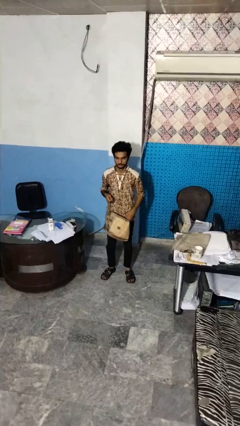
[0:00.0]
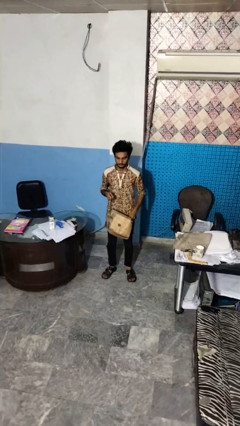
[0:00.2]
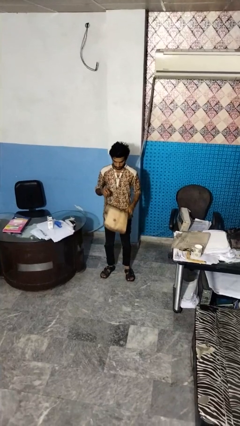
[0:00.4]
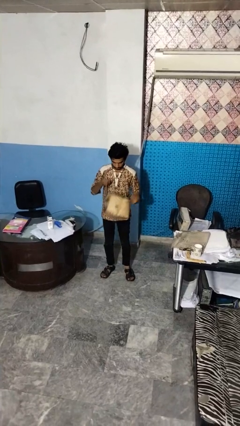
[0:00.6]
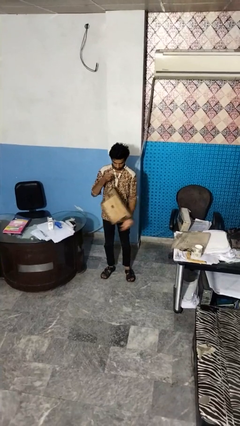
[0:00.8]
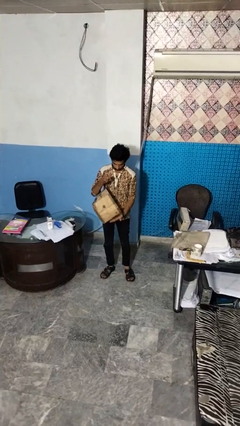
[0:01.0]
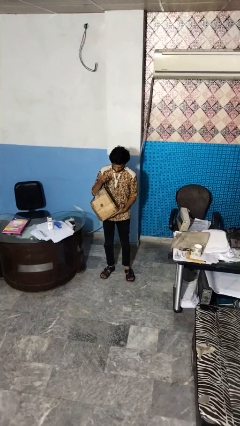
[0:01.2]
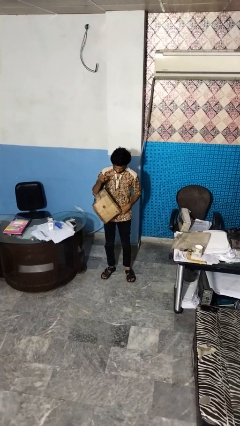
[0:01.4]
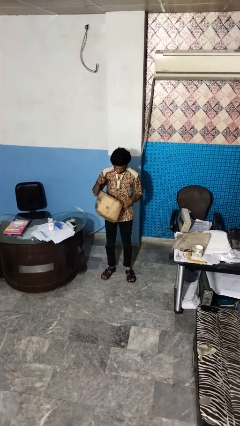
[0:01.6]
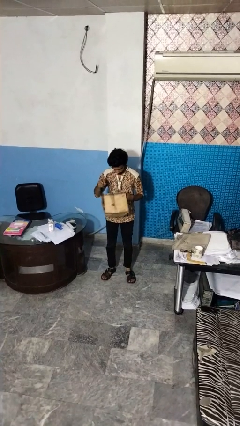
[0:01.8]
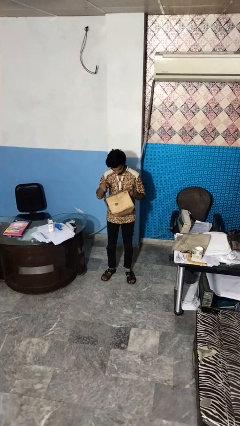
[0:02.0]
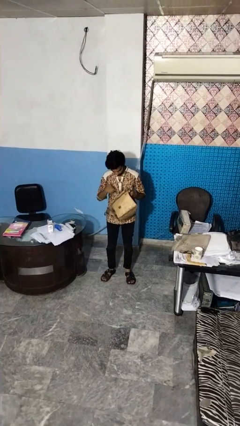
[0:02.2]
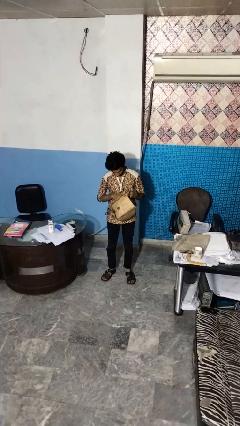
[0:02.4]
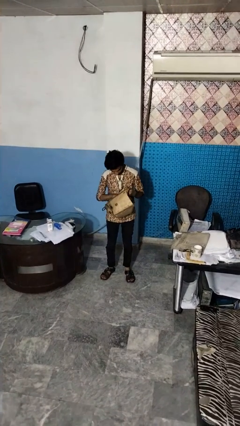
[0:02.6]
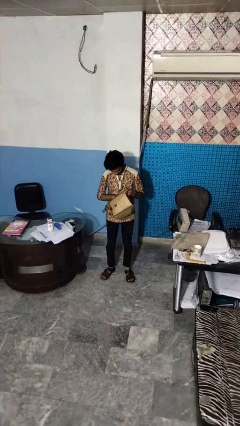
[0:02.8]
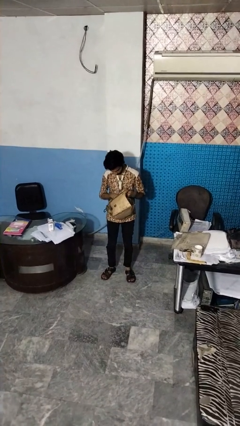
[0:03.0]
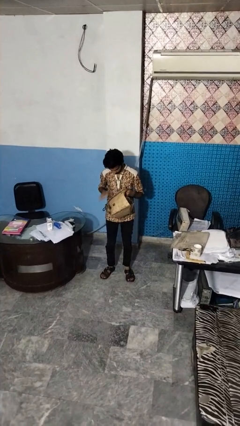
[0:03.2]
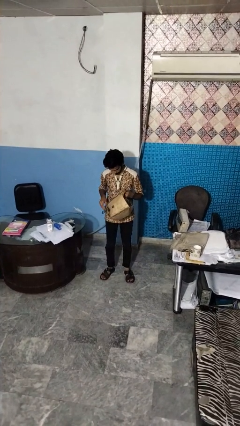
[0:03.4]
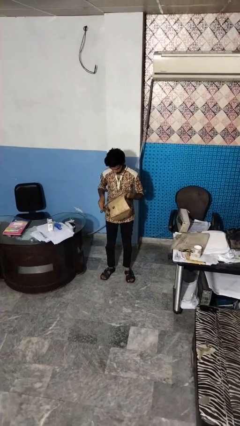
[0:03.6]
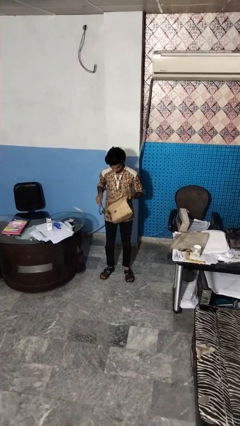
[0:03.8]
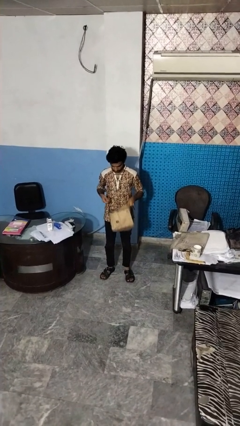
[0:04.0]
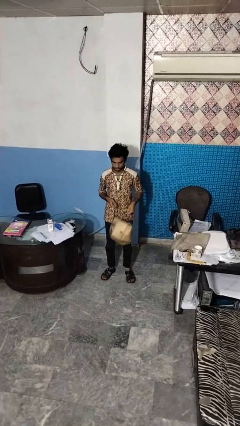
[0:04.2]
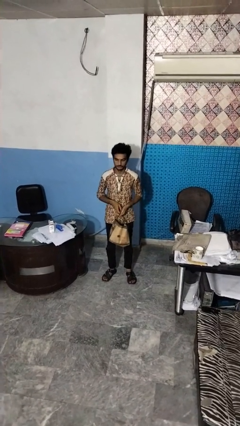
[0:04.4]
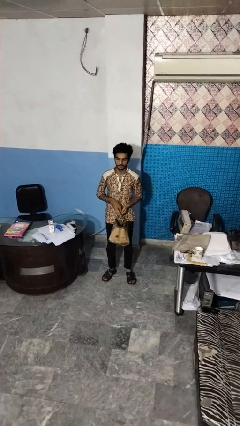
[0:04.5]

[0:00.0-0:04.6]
person searches in bag

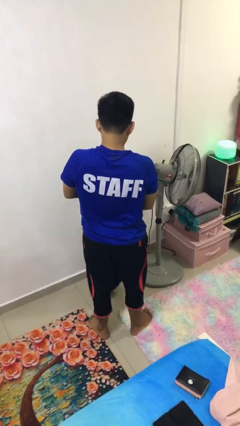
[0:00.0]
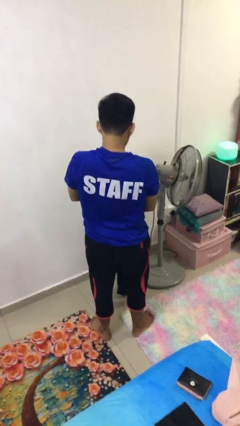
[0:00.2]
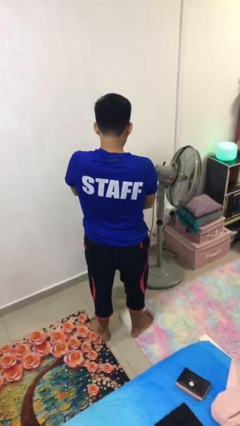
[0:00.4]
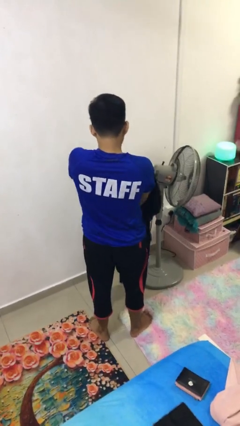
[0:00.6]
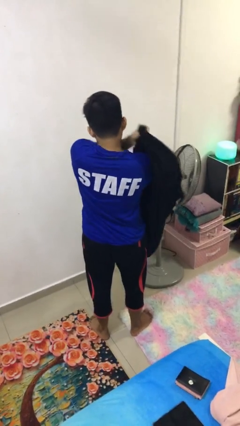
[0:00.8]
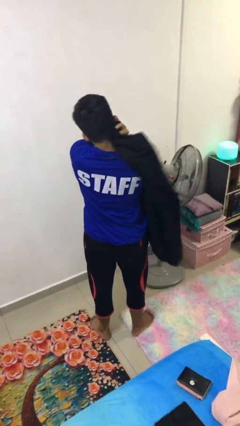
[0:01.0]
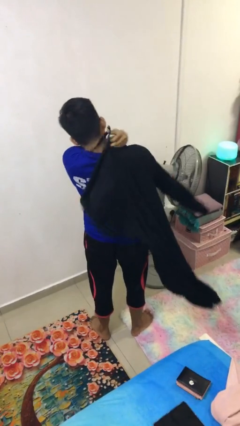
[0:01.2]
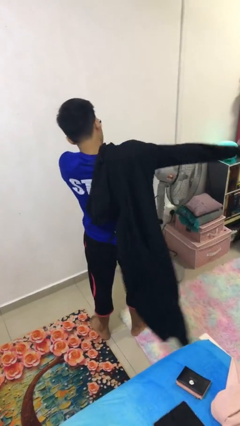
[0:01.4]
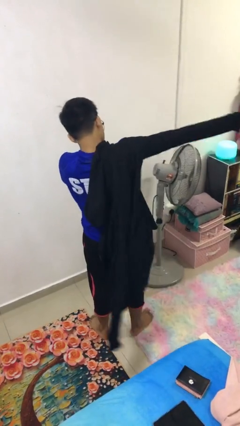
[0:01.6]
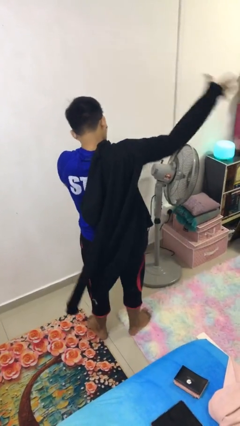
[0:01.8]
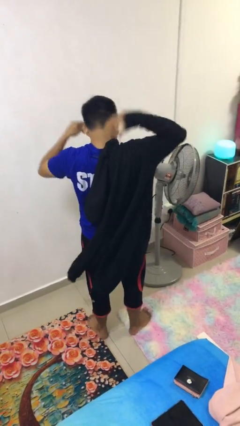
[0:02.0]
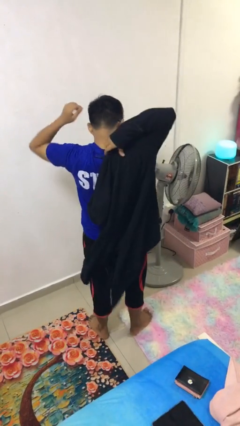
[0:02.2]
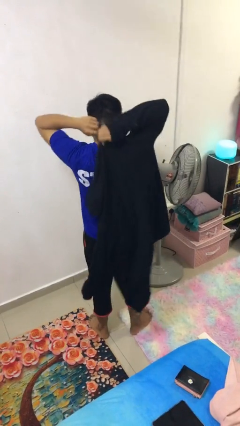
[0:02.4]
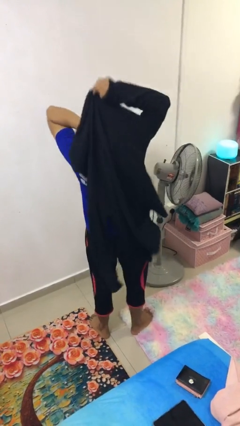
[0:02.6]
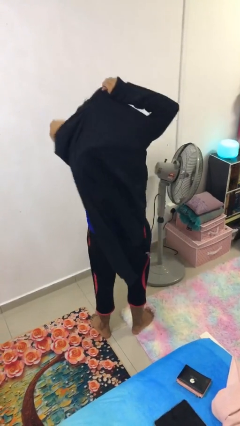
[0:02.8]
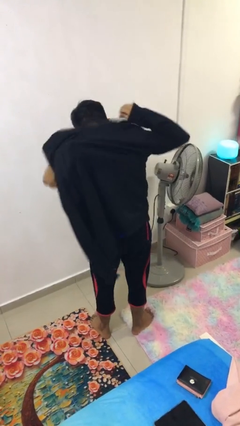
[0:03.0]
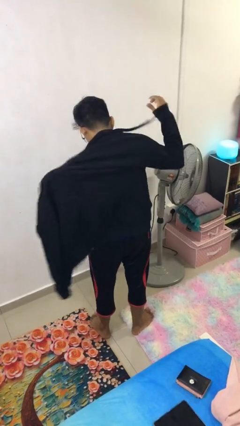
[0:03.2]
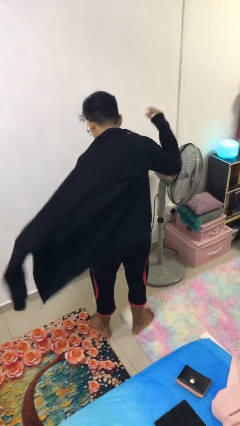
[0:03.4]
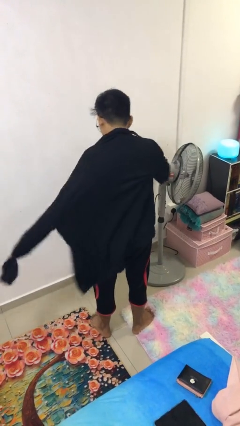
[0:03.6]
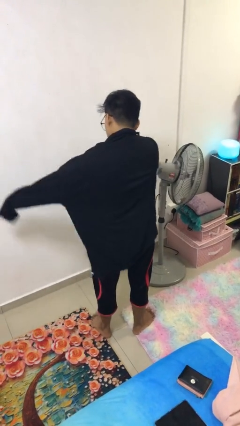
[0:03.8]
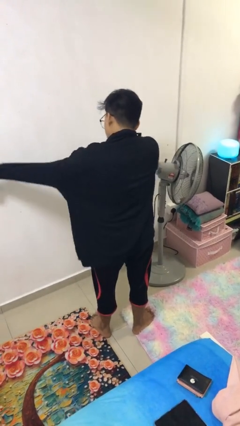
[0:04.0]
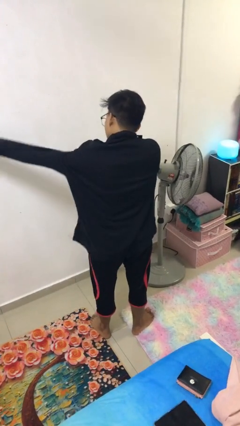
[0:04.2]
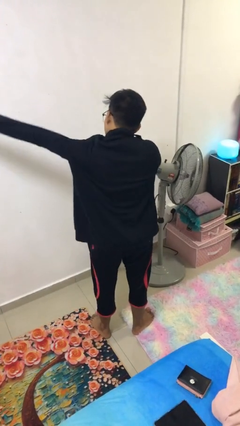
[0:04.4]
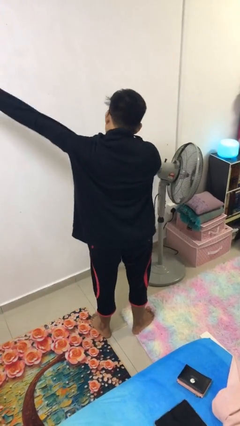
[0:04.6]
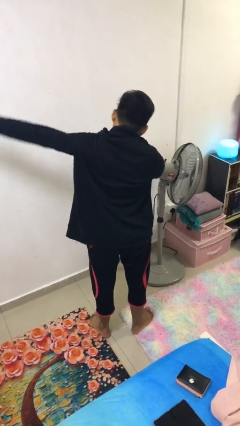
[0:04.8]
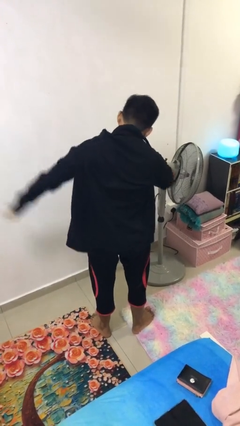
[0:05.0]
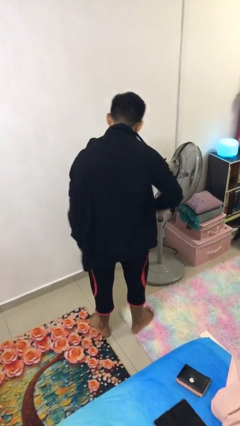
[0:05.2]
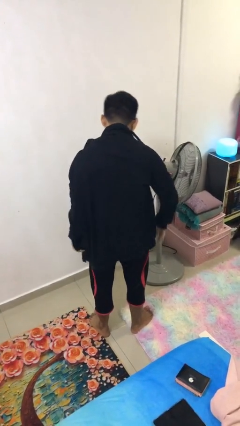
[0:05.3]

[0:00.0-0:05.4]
person puts on jacket

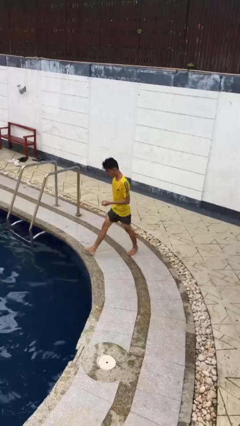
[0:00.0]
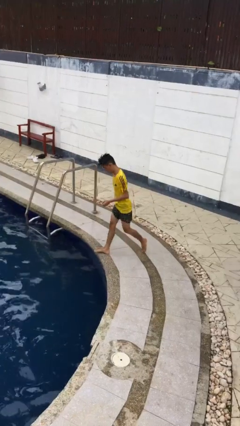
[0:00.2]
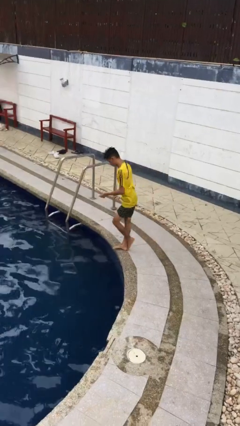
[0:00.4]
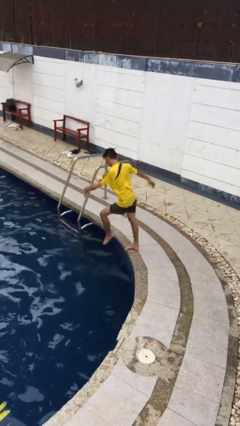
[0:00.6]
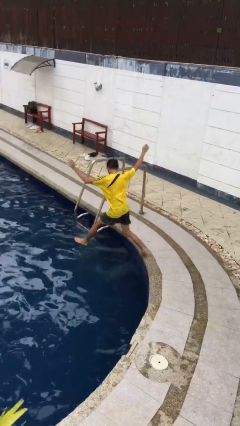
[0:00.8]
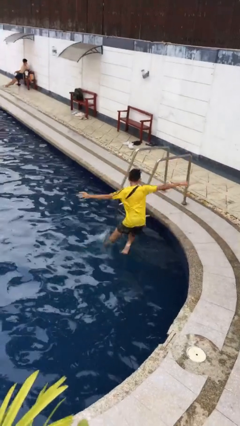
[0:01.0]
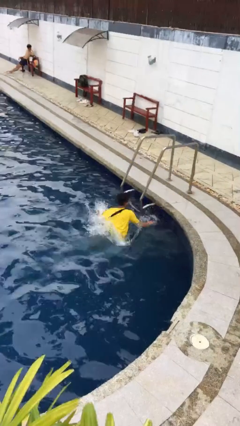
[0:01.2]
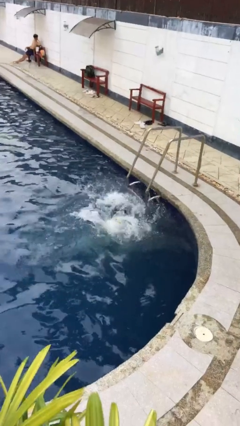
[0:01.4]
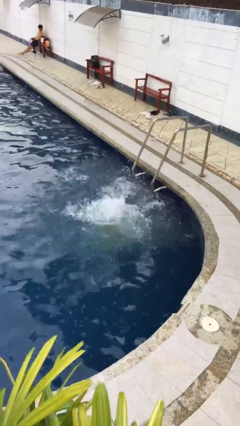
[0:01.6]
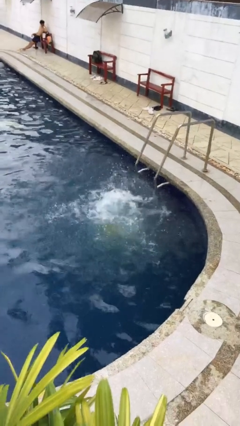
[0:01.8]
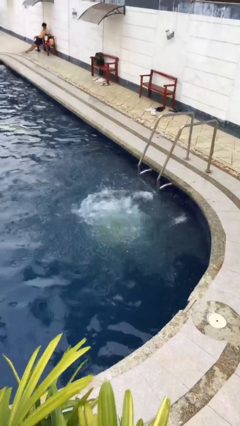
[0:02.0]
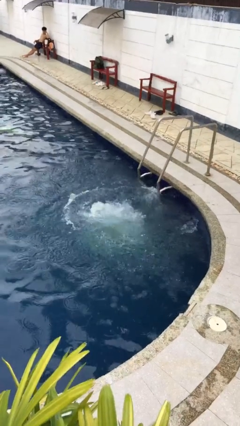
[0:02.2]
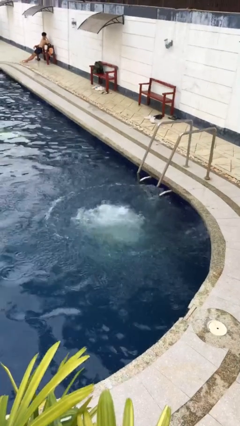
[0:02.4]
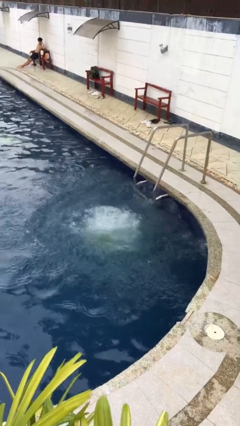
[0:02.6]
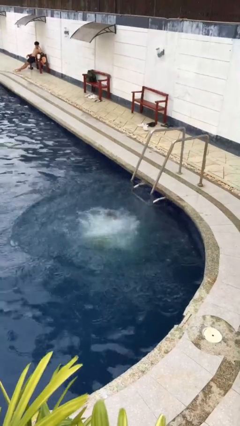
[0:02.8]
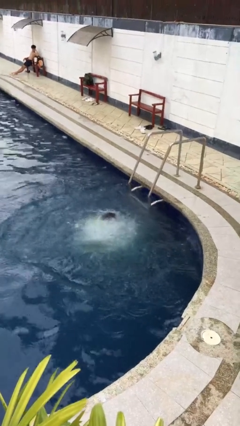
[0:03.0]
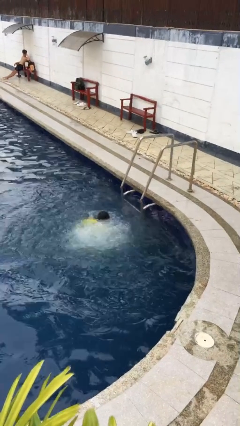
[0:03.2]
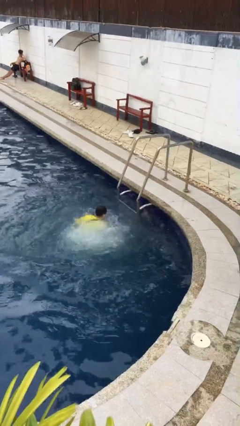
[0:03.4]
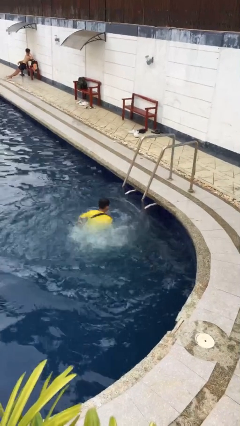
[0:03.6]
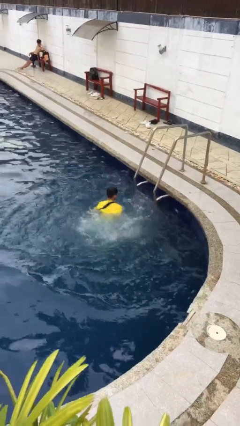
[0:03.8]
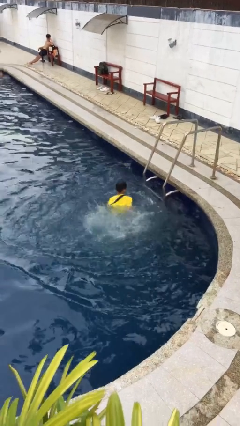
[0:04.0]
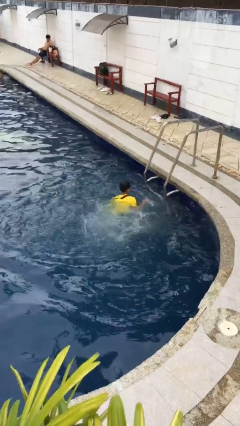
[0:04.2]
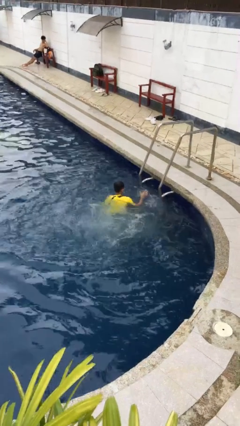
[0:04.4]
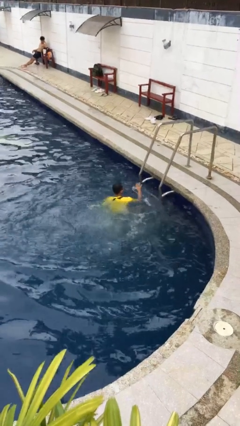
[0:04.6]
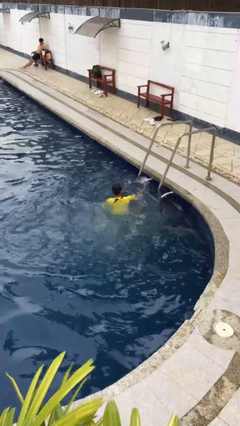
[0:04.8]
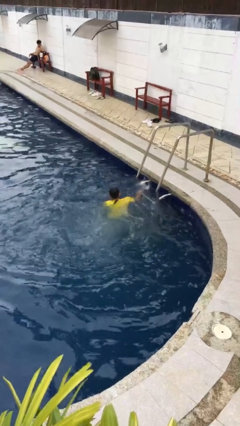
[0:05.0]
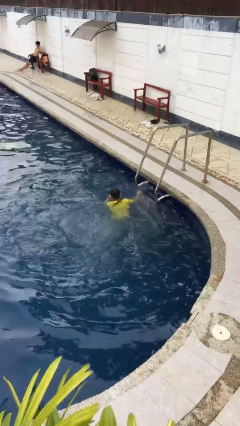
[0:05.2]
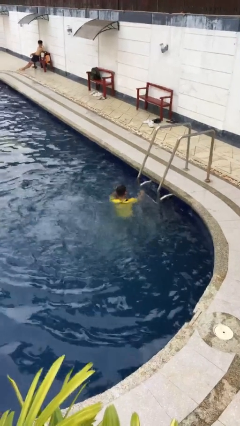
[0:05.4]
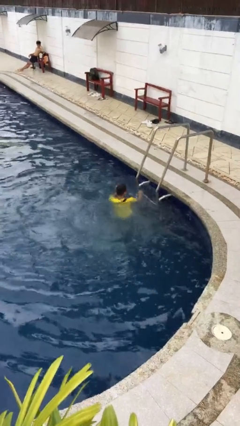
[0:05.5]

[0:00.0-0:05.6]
person falls into pool

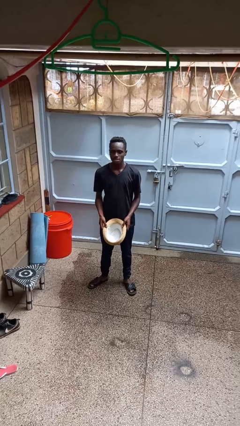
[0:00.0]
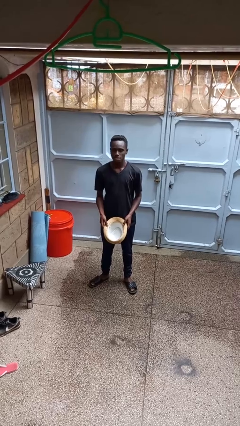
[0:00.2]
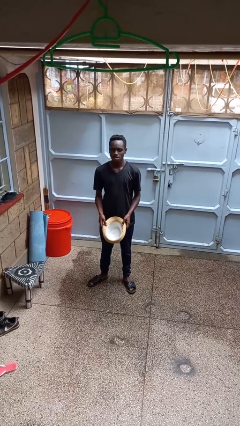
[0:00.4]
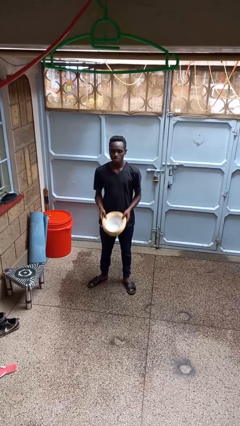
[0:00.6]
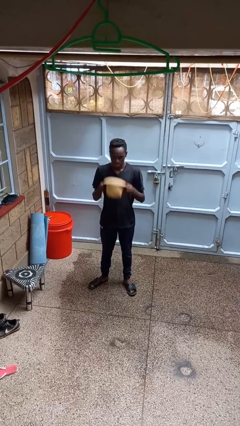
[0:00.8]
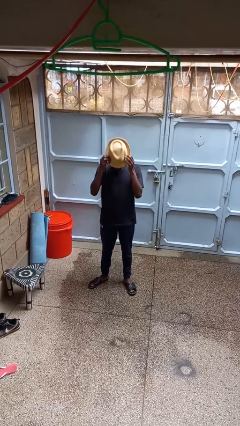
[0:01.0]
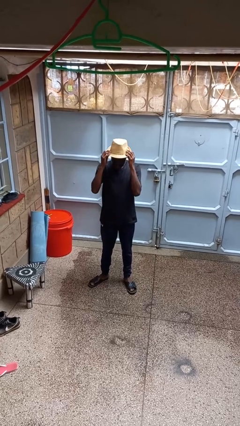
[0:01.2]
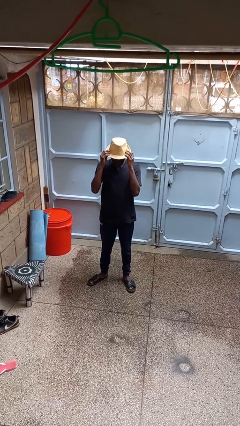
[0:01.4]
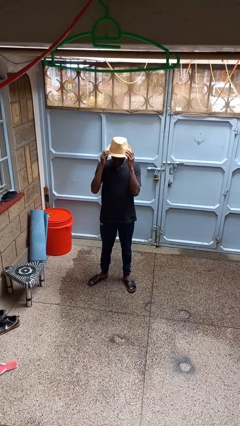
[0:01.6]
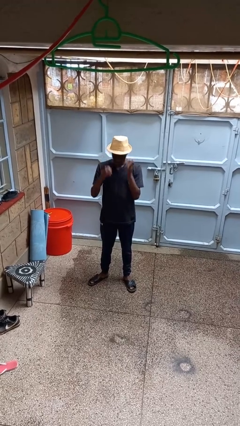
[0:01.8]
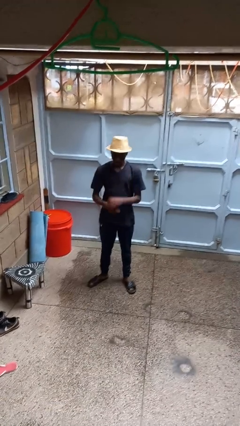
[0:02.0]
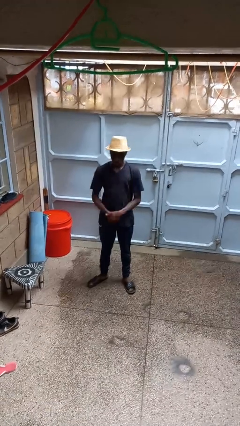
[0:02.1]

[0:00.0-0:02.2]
person puts on hat
